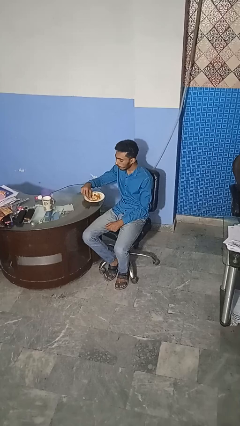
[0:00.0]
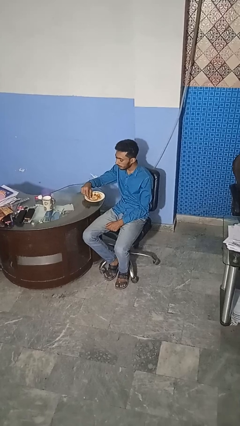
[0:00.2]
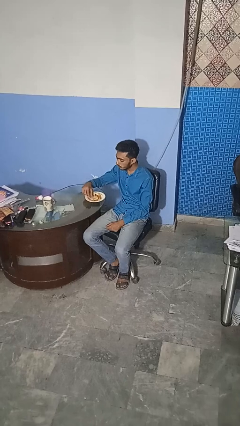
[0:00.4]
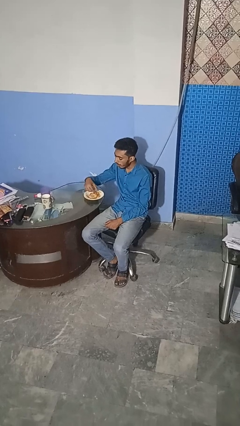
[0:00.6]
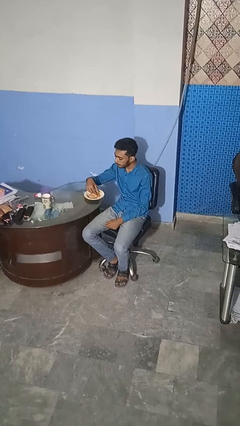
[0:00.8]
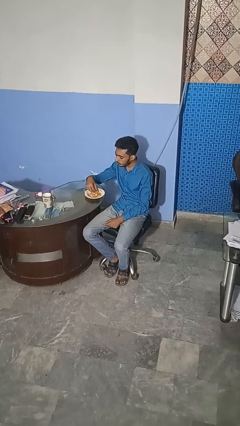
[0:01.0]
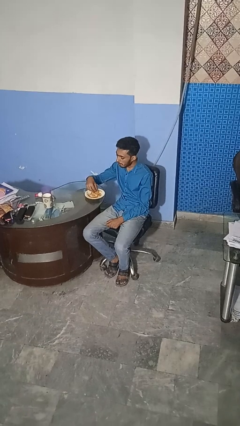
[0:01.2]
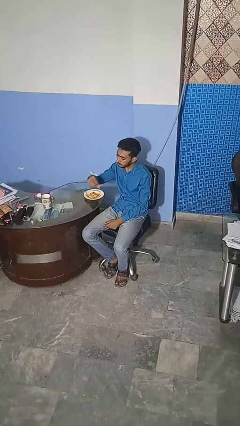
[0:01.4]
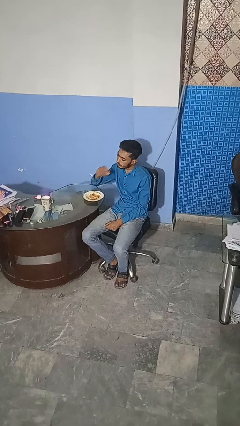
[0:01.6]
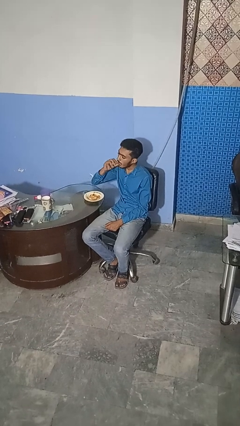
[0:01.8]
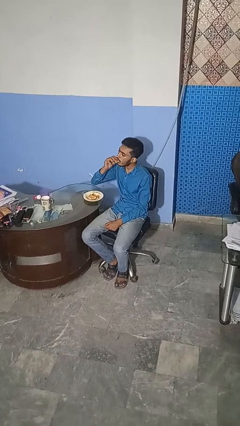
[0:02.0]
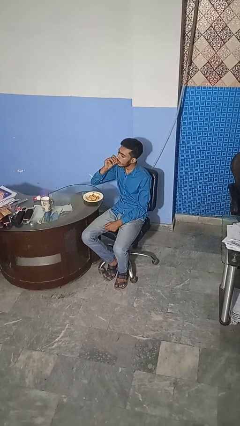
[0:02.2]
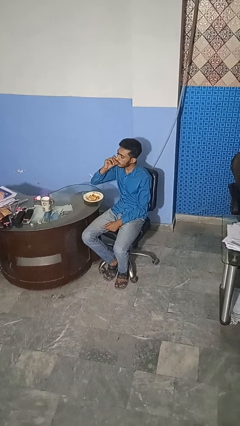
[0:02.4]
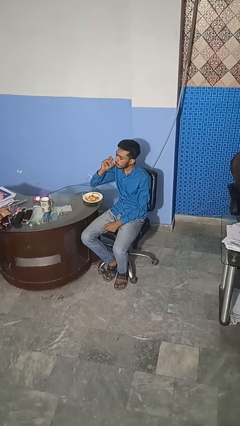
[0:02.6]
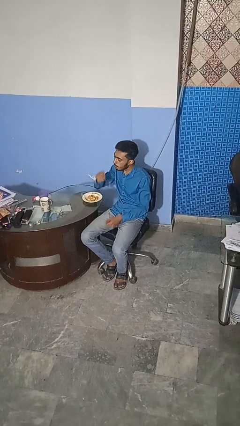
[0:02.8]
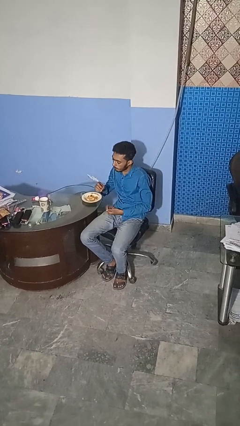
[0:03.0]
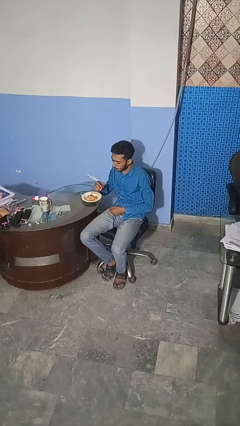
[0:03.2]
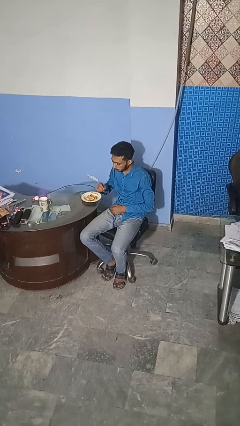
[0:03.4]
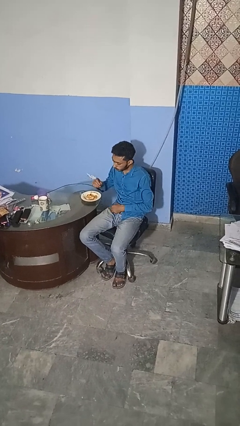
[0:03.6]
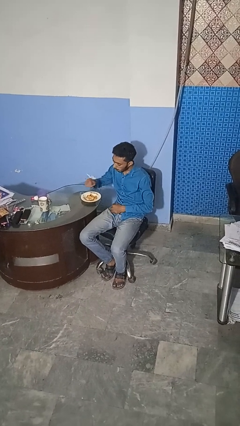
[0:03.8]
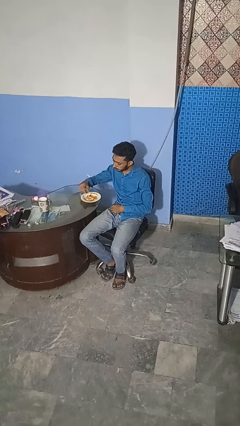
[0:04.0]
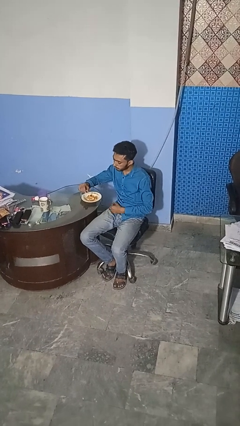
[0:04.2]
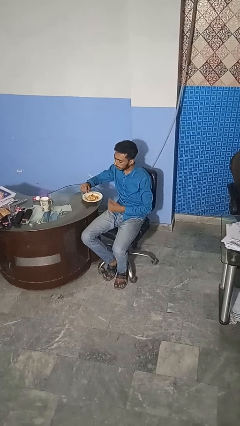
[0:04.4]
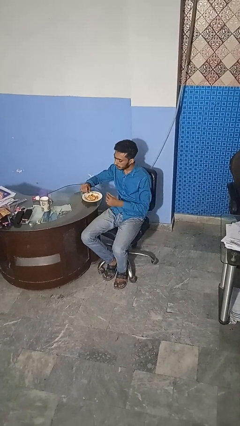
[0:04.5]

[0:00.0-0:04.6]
person eats with hands

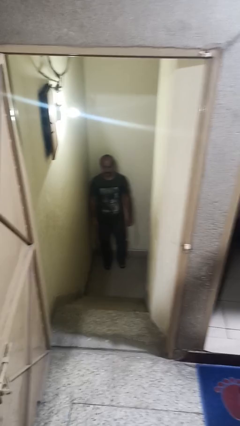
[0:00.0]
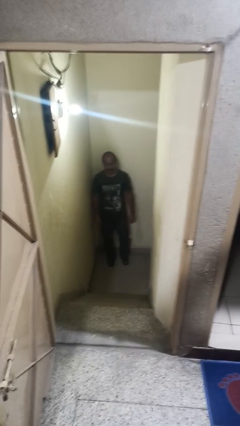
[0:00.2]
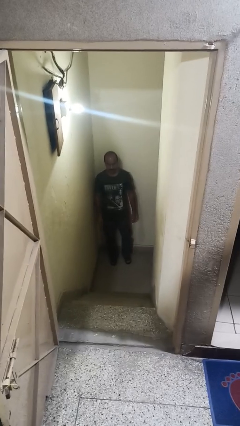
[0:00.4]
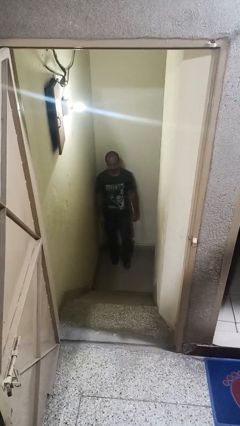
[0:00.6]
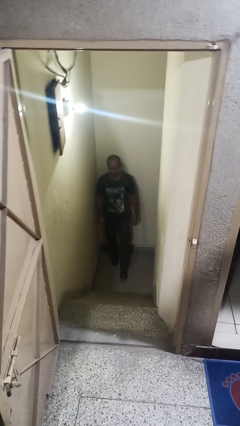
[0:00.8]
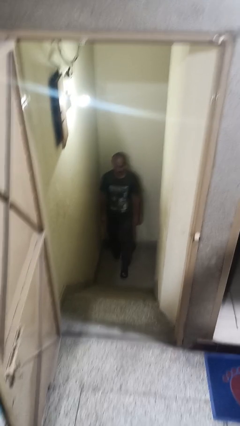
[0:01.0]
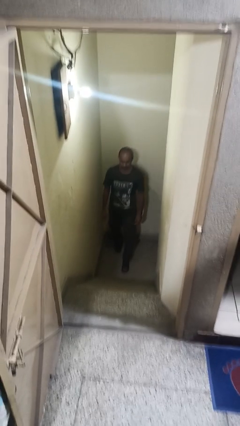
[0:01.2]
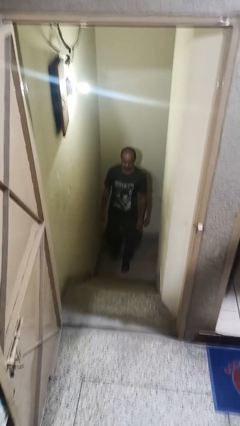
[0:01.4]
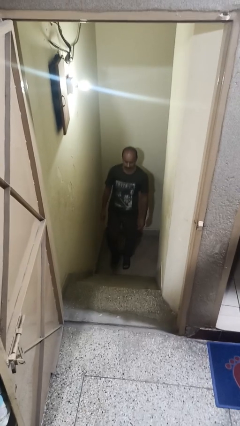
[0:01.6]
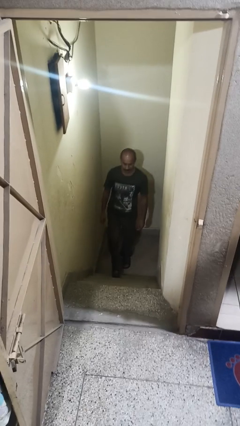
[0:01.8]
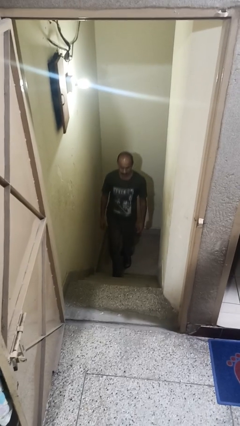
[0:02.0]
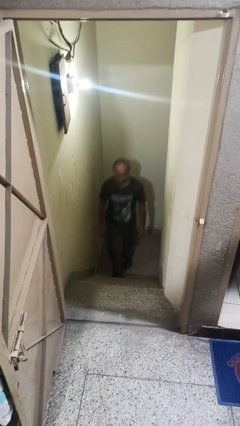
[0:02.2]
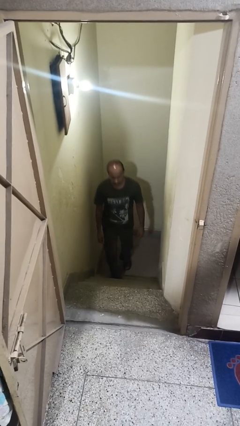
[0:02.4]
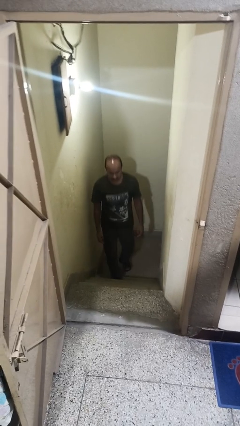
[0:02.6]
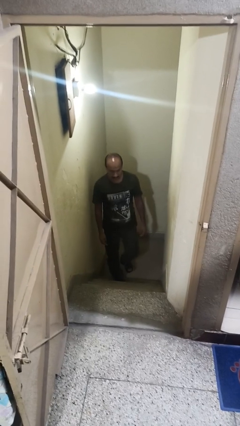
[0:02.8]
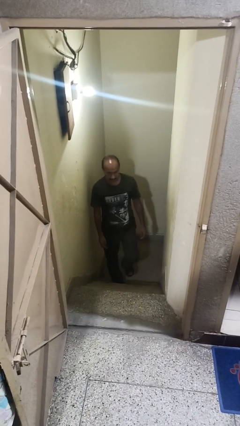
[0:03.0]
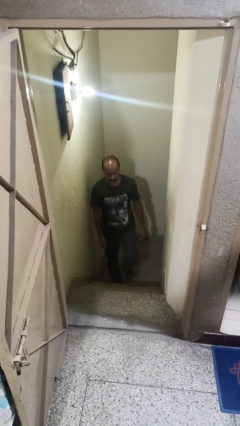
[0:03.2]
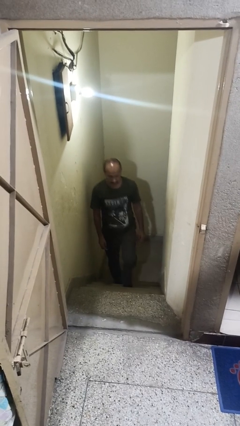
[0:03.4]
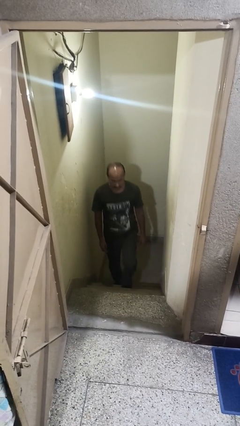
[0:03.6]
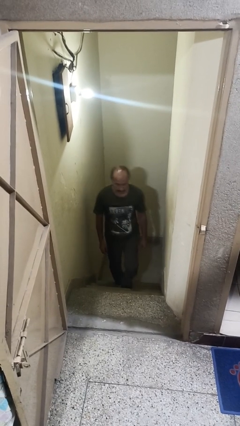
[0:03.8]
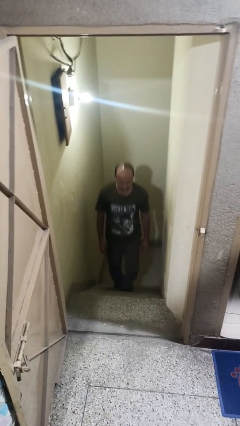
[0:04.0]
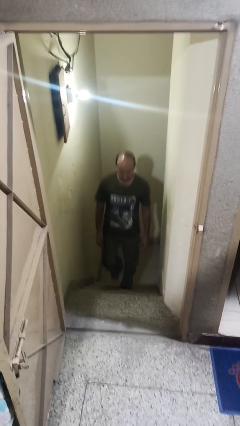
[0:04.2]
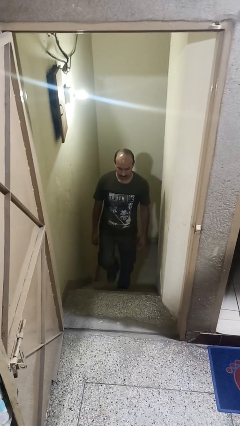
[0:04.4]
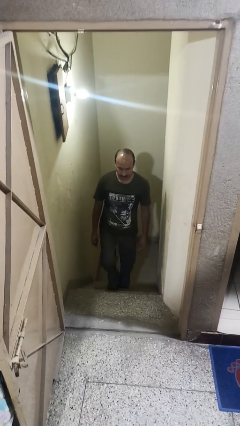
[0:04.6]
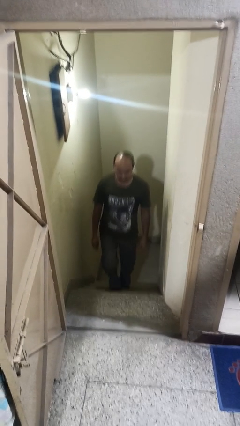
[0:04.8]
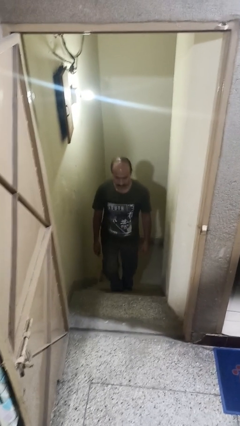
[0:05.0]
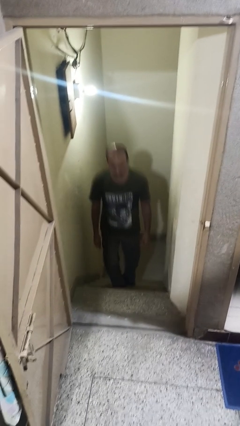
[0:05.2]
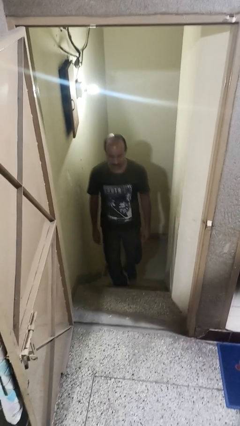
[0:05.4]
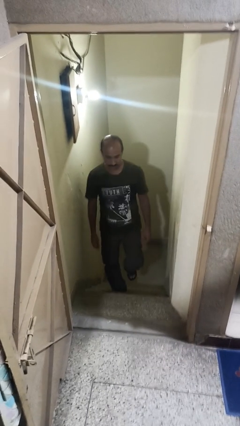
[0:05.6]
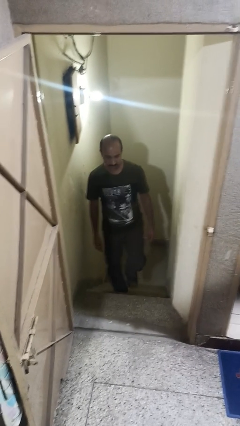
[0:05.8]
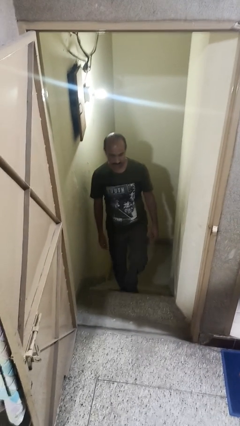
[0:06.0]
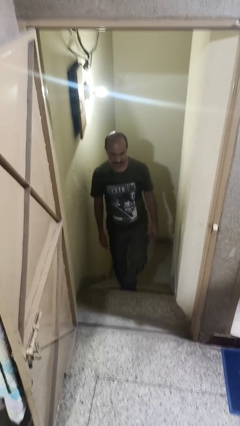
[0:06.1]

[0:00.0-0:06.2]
person climbs up stairs

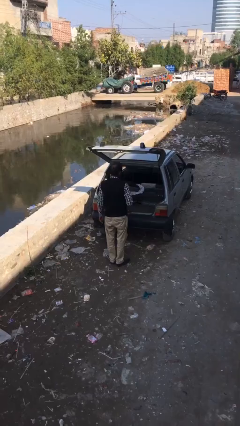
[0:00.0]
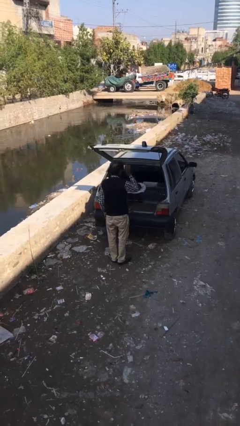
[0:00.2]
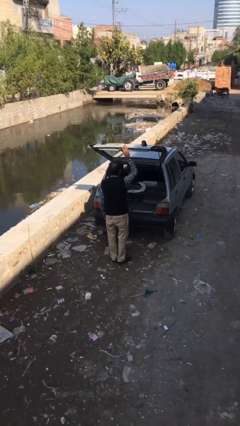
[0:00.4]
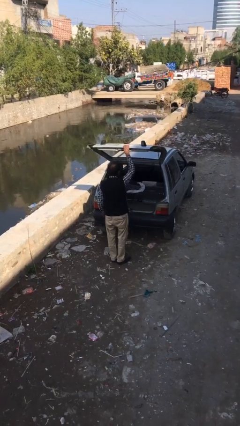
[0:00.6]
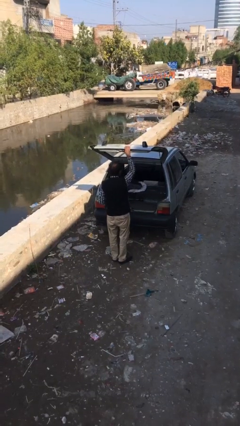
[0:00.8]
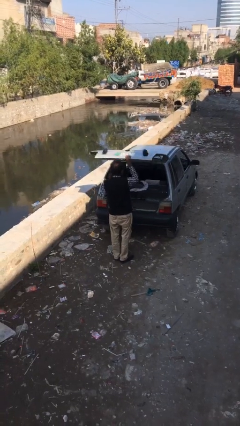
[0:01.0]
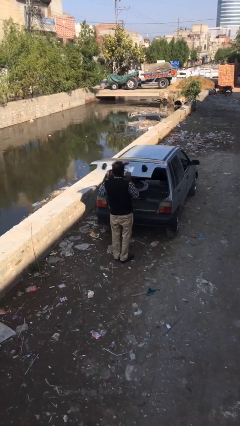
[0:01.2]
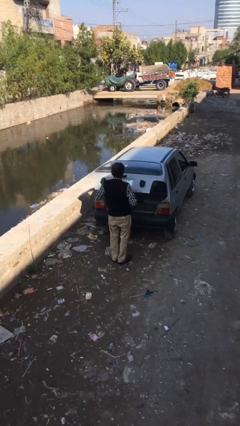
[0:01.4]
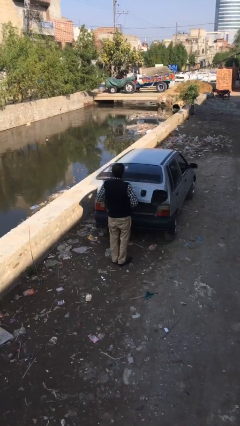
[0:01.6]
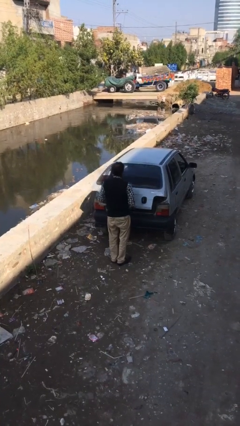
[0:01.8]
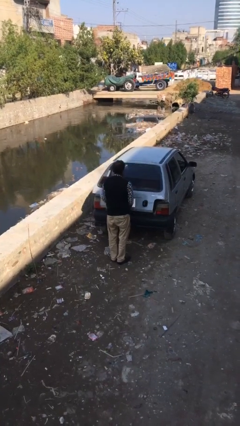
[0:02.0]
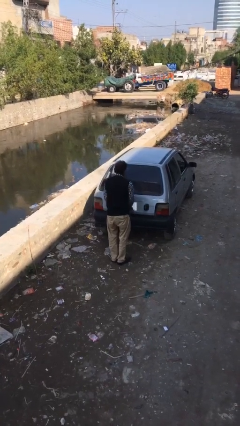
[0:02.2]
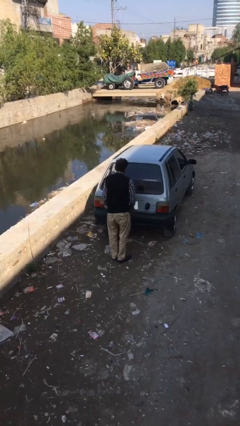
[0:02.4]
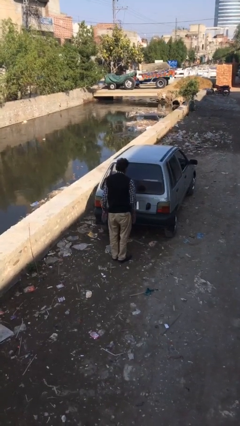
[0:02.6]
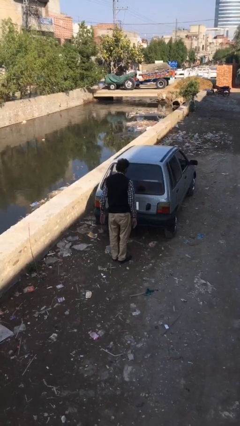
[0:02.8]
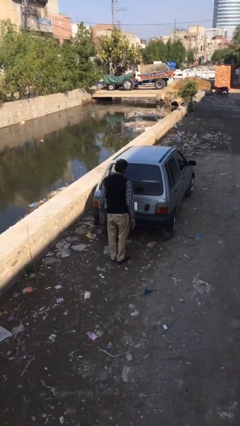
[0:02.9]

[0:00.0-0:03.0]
person closes car trunk

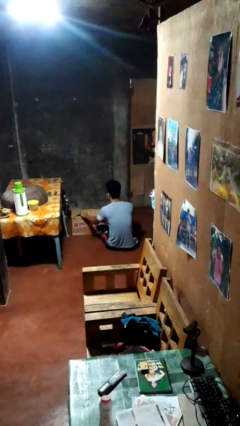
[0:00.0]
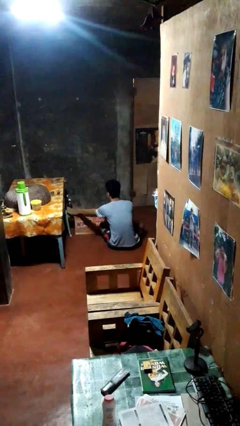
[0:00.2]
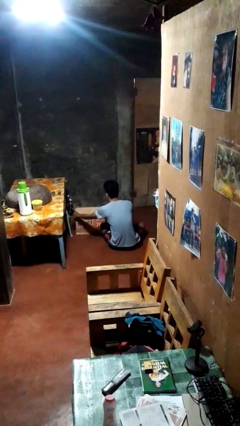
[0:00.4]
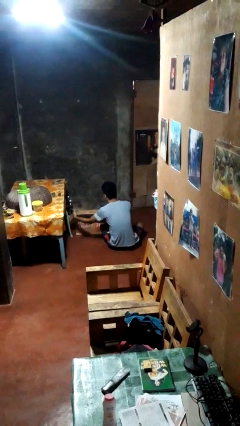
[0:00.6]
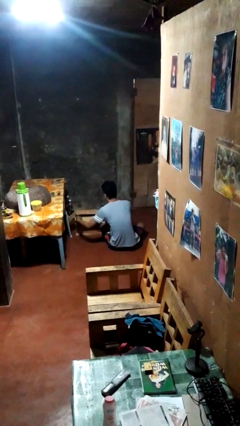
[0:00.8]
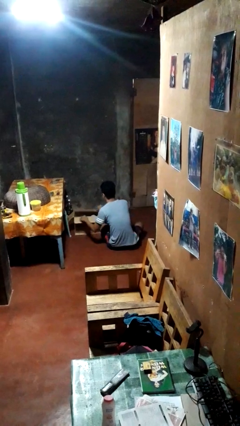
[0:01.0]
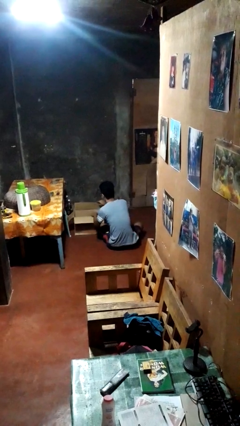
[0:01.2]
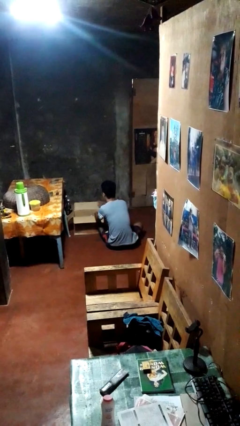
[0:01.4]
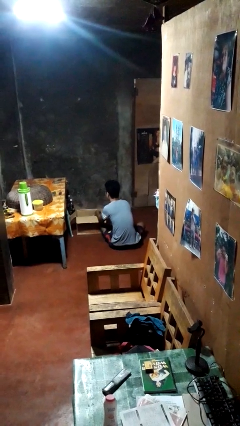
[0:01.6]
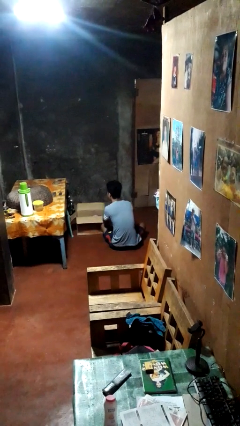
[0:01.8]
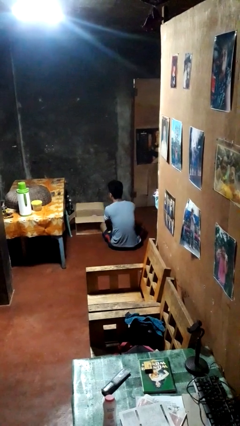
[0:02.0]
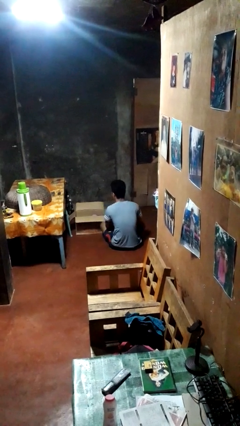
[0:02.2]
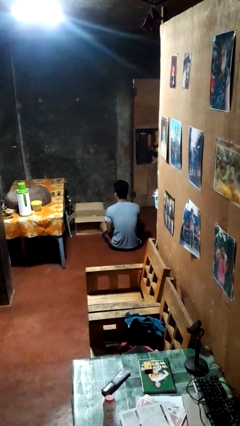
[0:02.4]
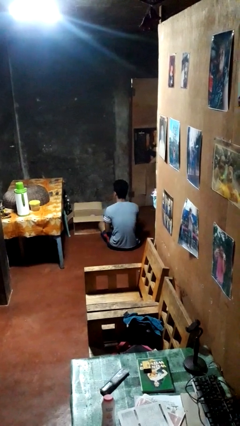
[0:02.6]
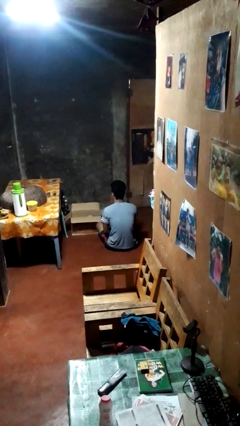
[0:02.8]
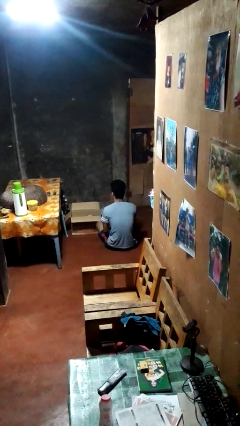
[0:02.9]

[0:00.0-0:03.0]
person opens box

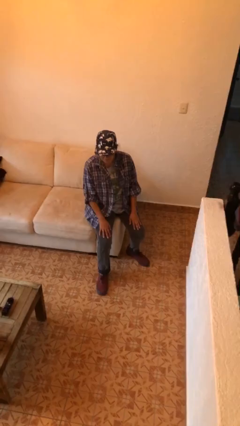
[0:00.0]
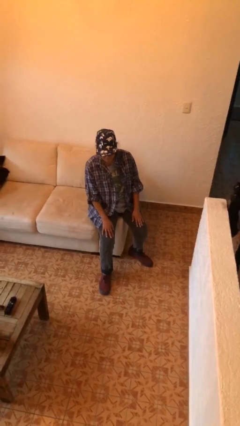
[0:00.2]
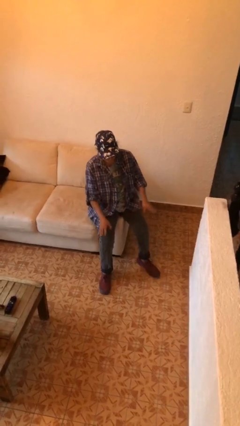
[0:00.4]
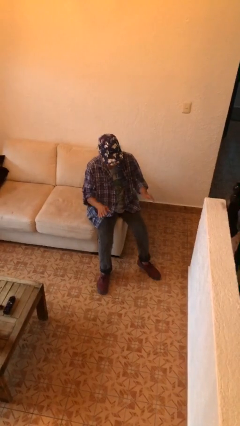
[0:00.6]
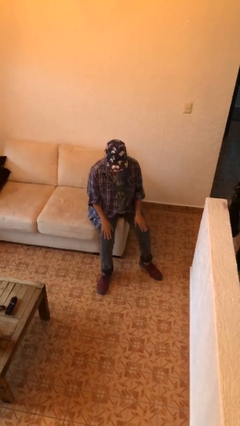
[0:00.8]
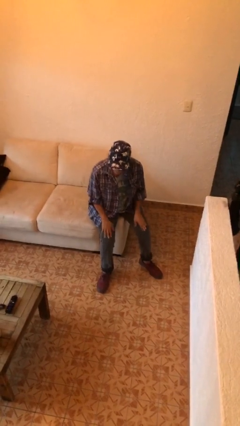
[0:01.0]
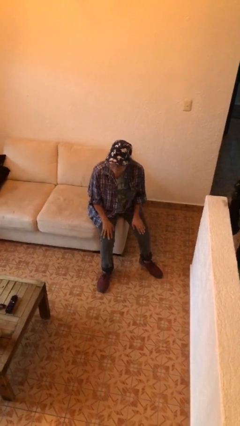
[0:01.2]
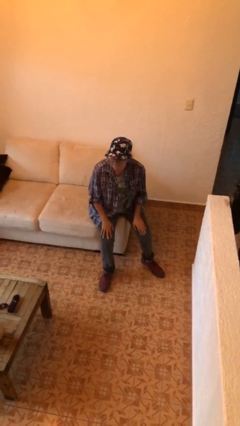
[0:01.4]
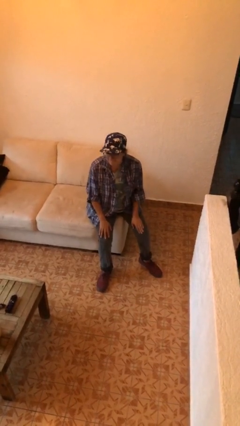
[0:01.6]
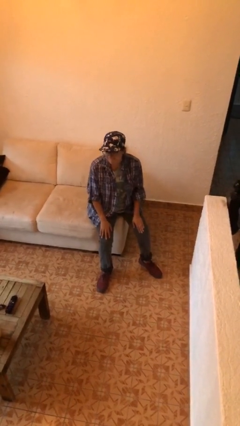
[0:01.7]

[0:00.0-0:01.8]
person slaps hands on thighs
